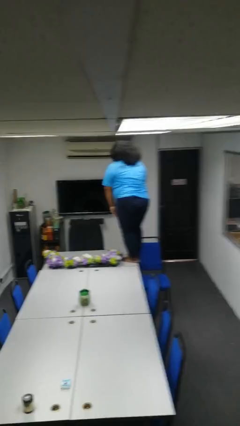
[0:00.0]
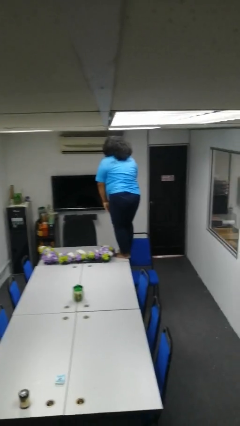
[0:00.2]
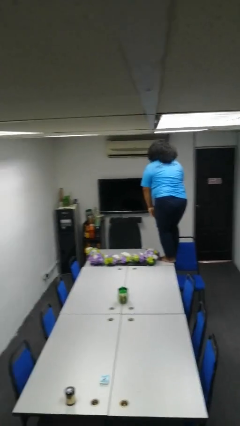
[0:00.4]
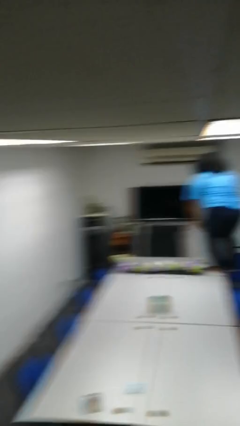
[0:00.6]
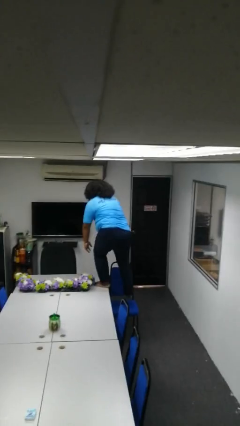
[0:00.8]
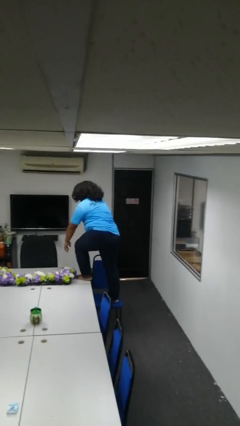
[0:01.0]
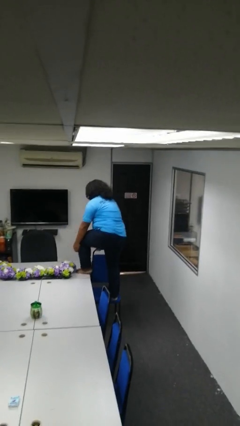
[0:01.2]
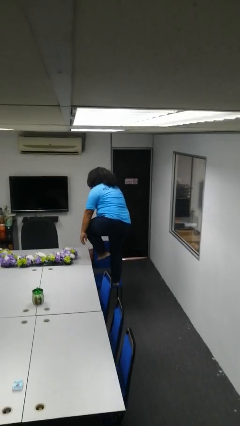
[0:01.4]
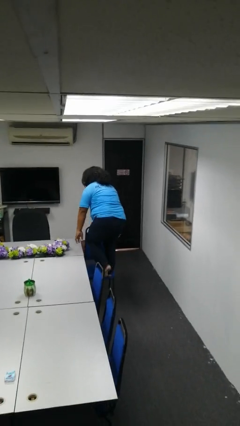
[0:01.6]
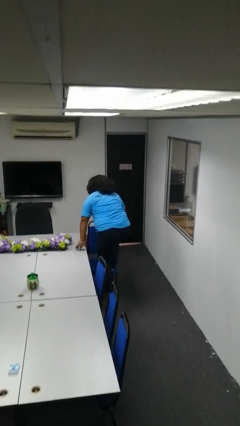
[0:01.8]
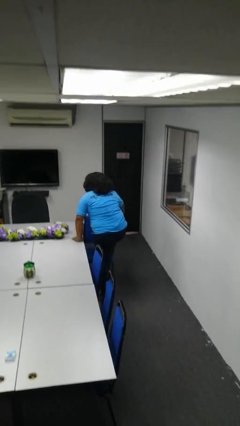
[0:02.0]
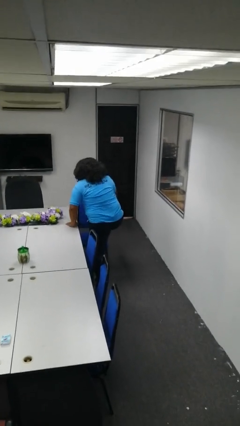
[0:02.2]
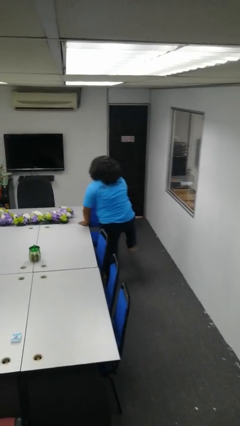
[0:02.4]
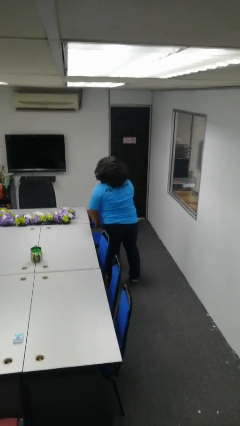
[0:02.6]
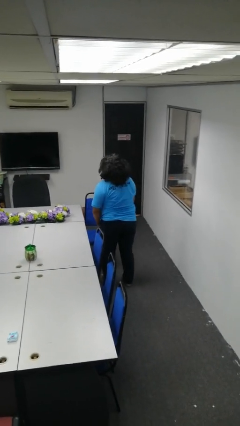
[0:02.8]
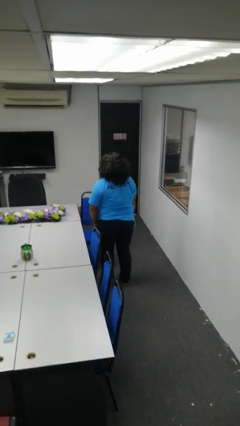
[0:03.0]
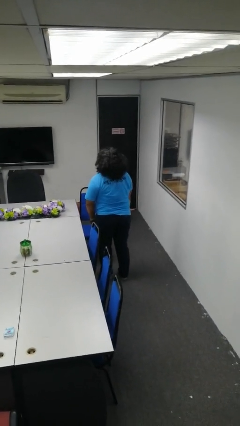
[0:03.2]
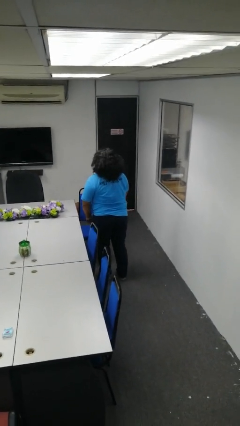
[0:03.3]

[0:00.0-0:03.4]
person climbs off table

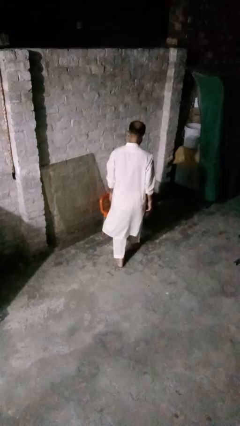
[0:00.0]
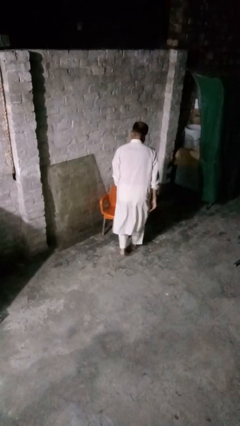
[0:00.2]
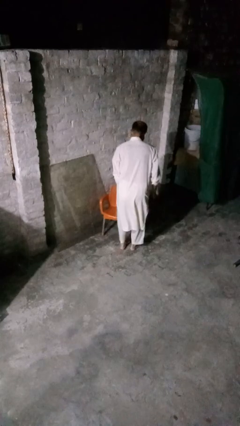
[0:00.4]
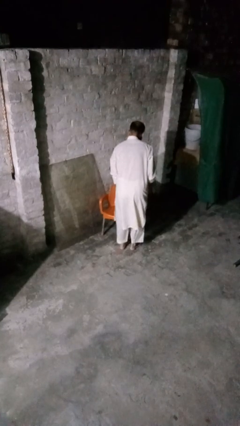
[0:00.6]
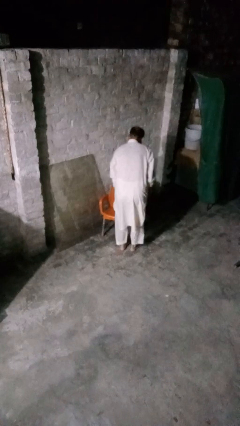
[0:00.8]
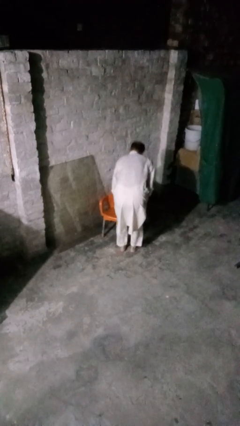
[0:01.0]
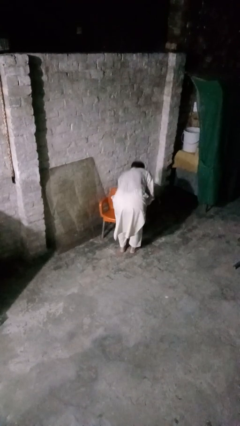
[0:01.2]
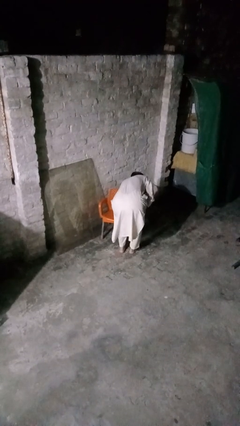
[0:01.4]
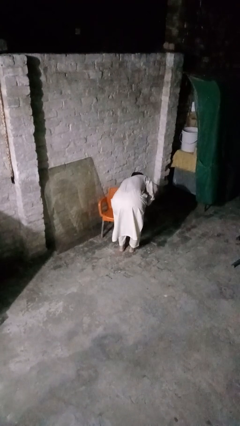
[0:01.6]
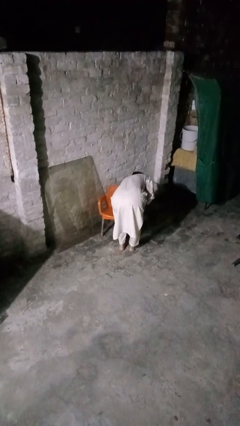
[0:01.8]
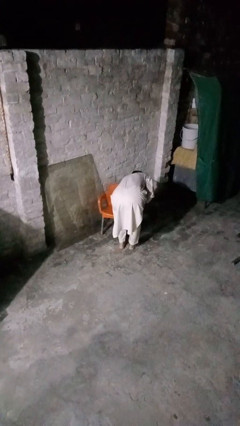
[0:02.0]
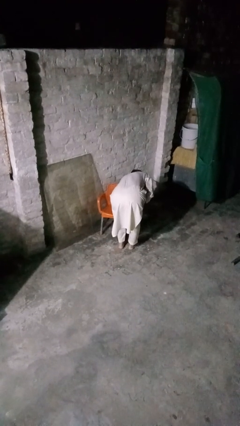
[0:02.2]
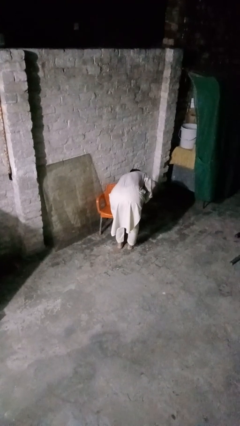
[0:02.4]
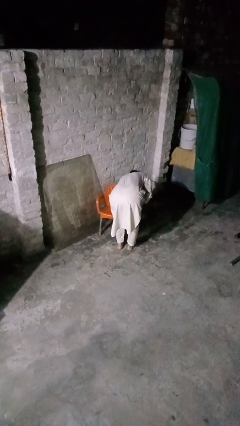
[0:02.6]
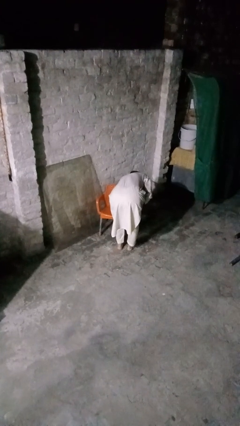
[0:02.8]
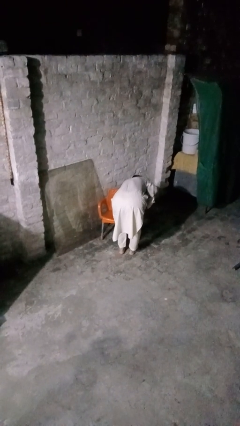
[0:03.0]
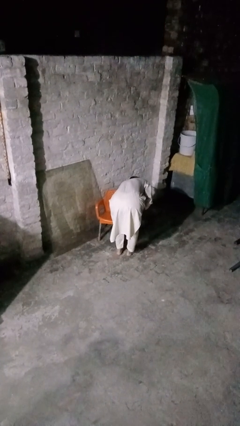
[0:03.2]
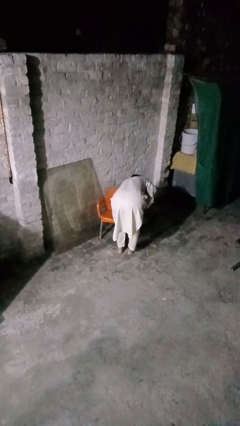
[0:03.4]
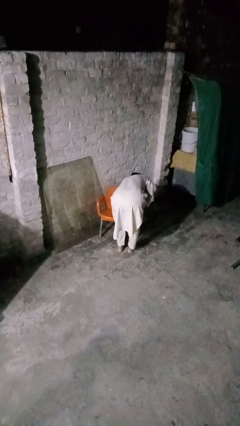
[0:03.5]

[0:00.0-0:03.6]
person stubs toe

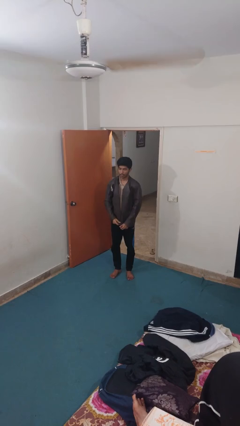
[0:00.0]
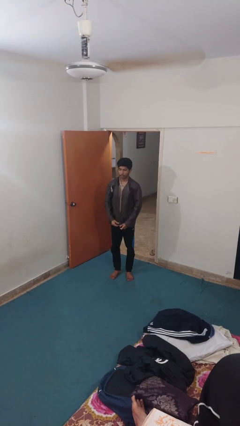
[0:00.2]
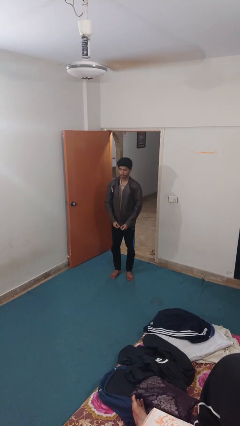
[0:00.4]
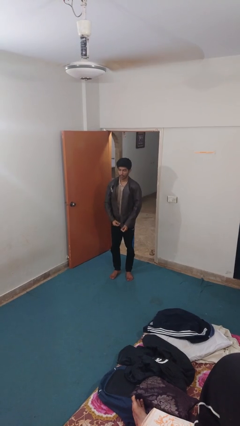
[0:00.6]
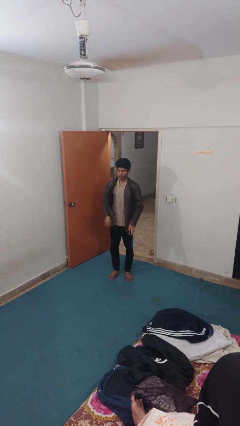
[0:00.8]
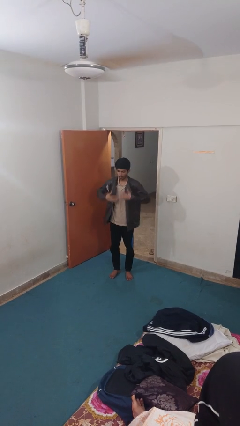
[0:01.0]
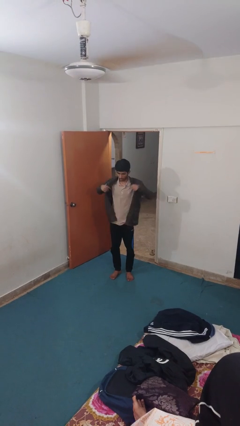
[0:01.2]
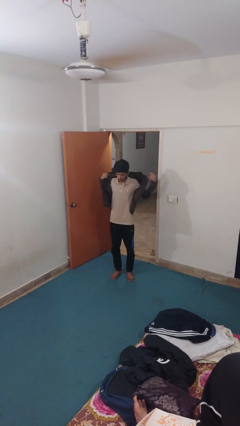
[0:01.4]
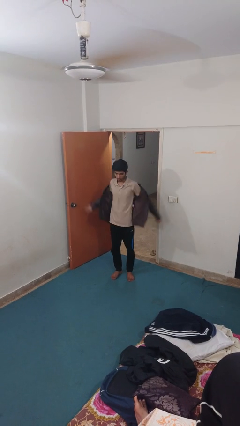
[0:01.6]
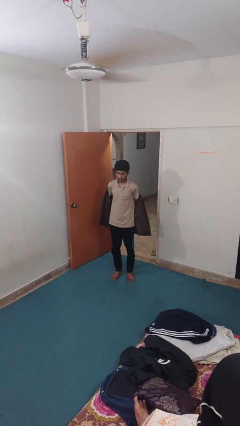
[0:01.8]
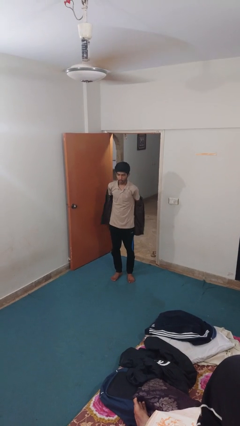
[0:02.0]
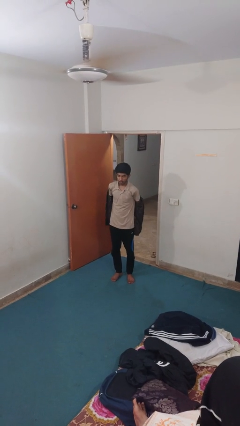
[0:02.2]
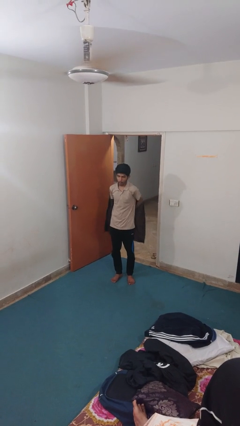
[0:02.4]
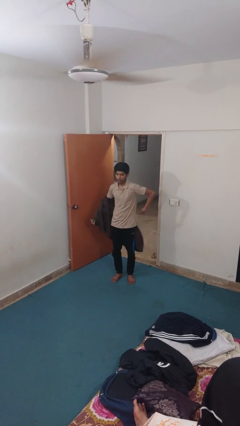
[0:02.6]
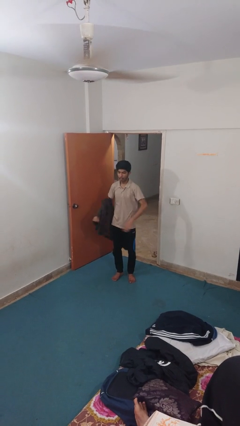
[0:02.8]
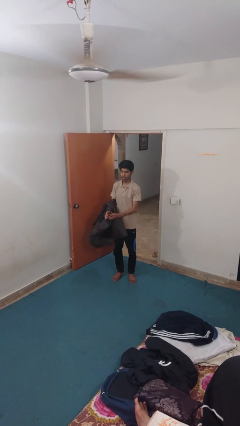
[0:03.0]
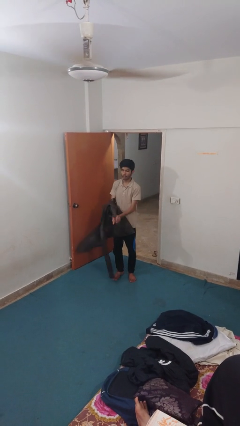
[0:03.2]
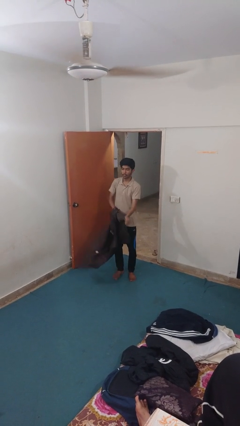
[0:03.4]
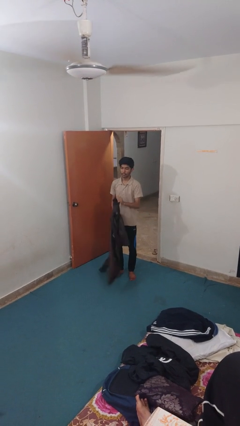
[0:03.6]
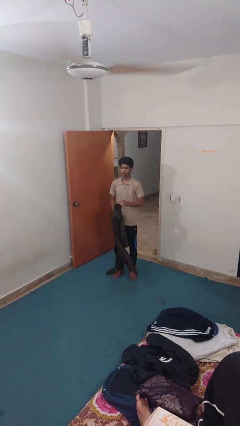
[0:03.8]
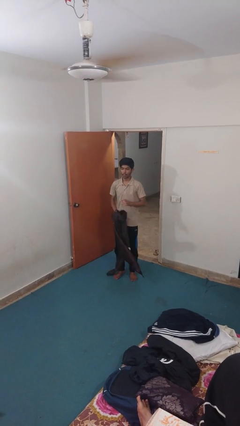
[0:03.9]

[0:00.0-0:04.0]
person takes off jacket

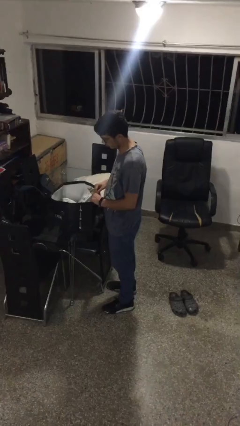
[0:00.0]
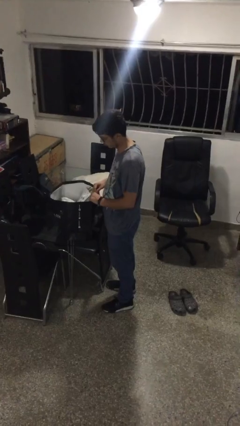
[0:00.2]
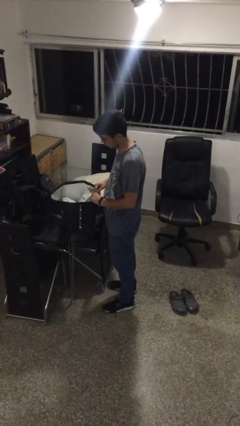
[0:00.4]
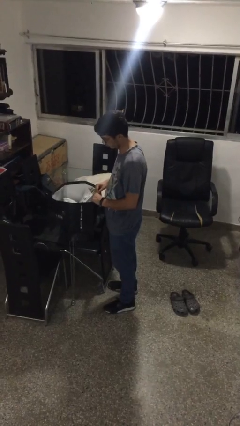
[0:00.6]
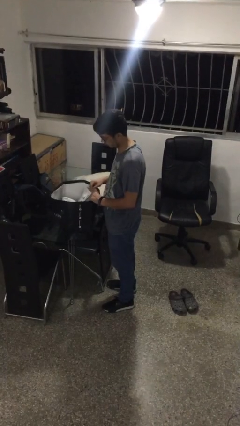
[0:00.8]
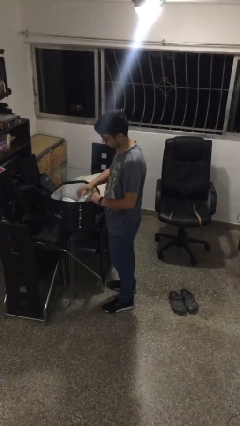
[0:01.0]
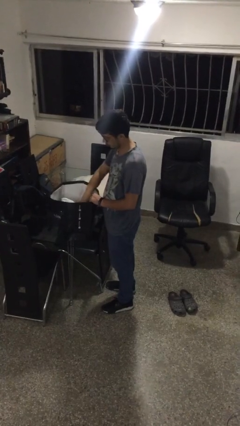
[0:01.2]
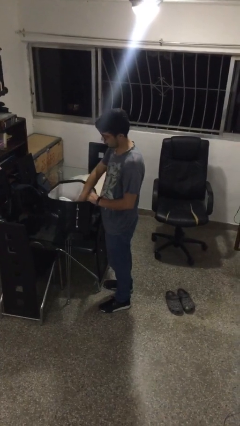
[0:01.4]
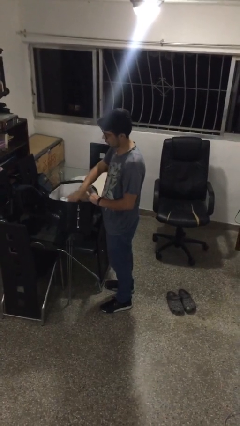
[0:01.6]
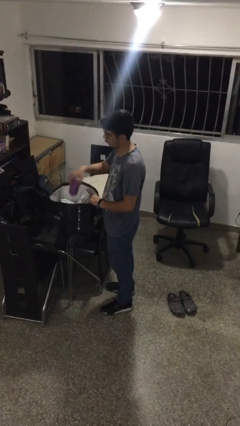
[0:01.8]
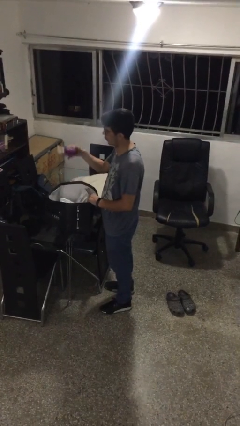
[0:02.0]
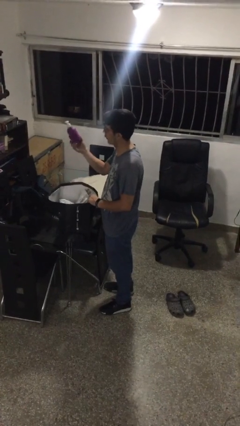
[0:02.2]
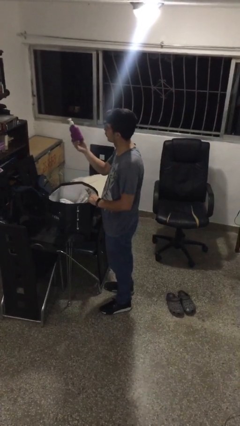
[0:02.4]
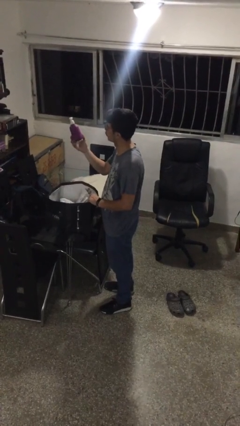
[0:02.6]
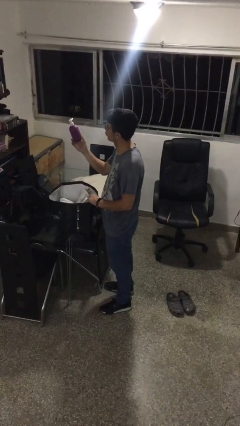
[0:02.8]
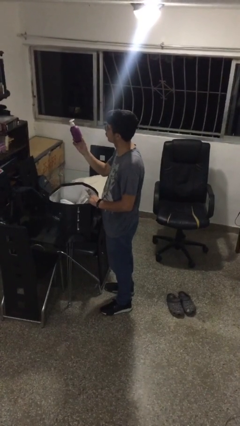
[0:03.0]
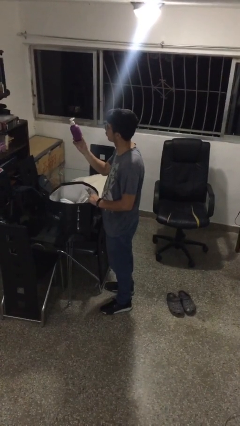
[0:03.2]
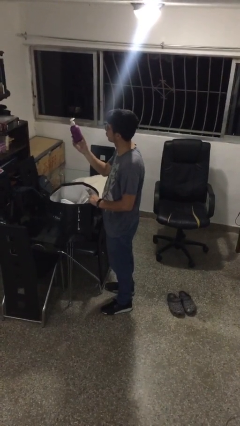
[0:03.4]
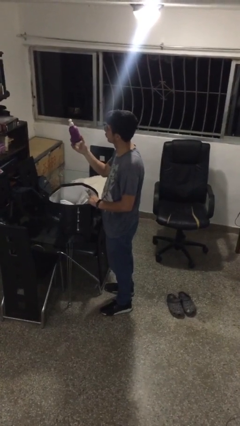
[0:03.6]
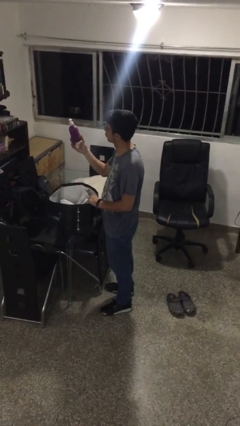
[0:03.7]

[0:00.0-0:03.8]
person takes object from bag

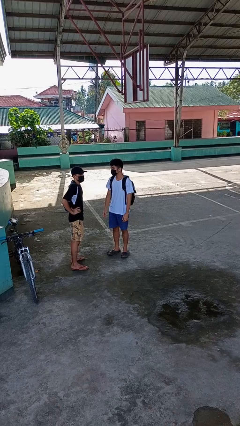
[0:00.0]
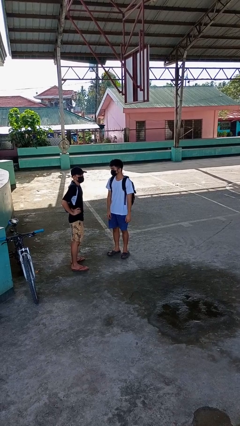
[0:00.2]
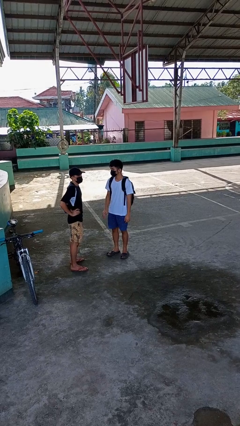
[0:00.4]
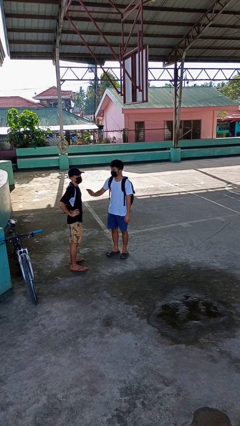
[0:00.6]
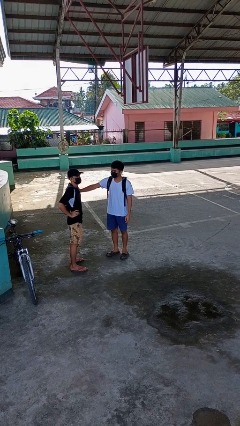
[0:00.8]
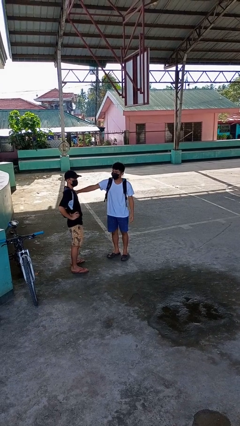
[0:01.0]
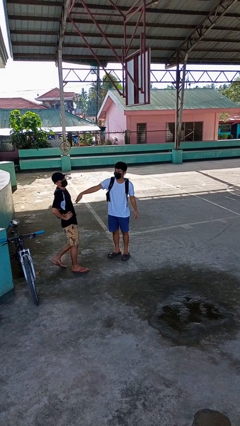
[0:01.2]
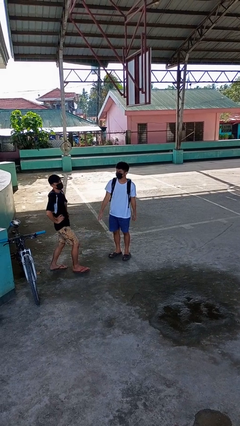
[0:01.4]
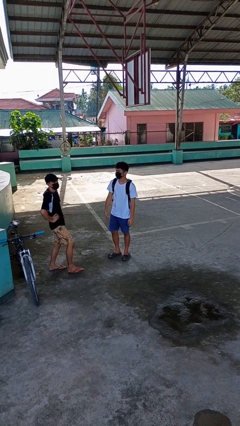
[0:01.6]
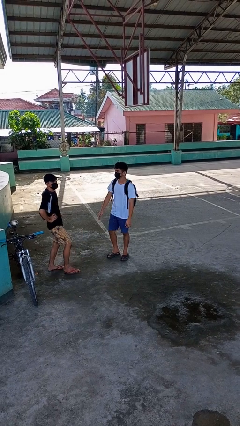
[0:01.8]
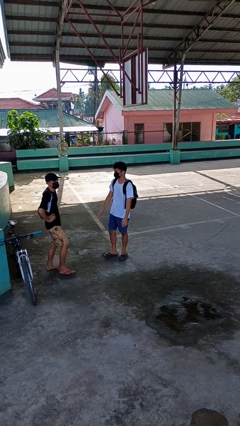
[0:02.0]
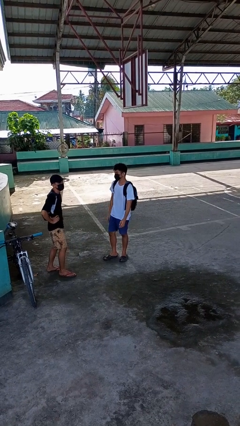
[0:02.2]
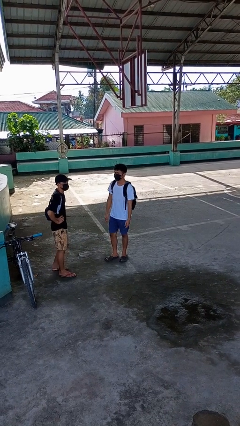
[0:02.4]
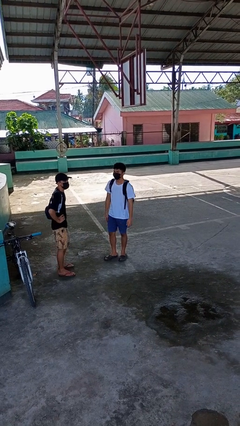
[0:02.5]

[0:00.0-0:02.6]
person shoves person
